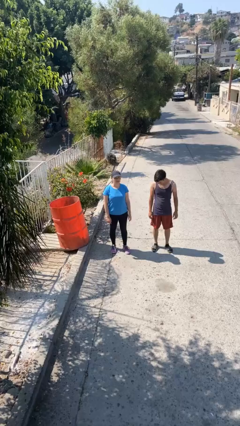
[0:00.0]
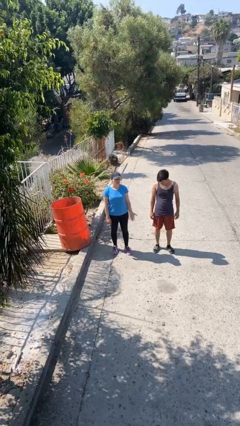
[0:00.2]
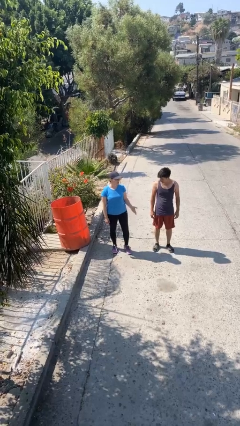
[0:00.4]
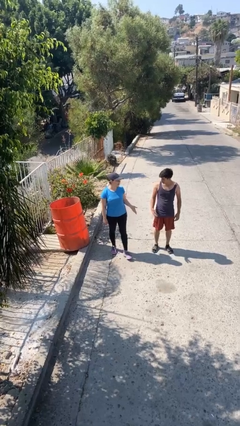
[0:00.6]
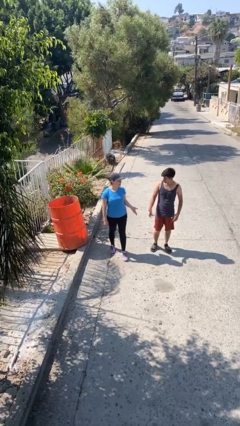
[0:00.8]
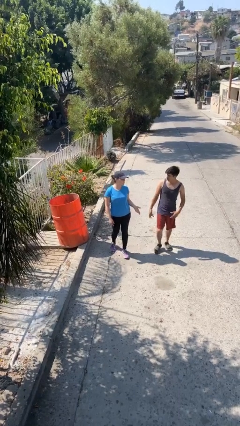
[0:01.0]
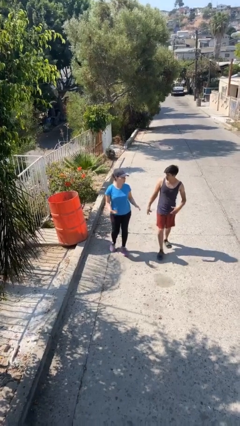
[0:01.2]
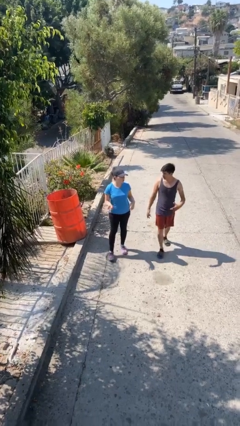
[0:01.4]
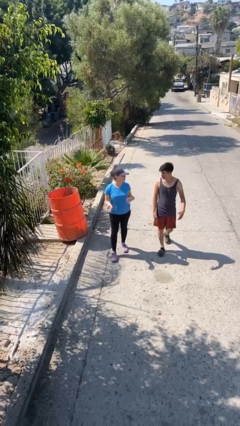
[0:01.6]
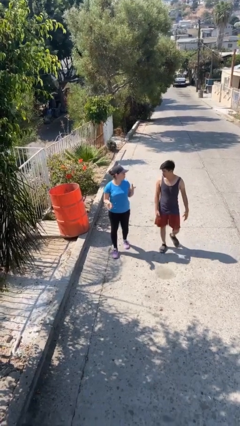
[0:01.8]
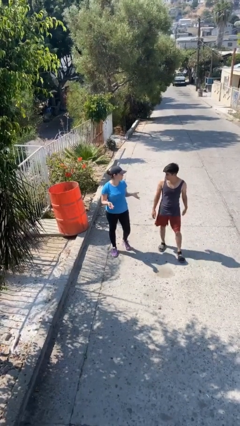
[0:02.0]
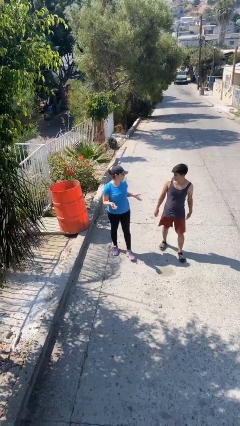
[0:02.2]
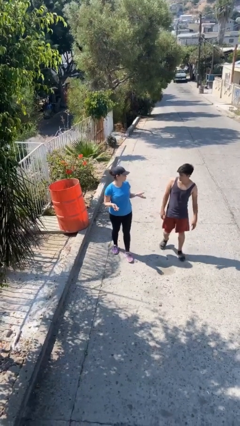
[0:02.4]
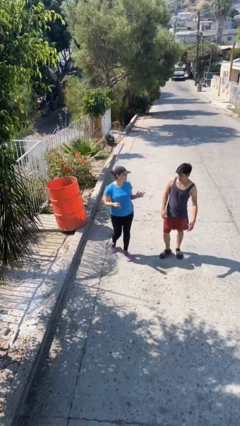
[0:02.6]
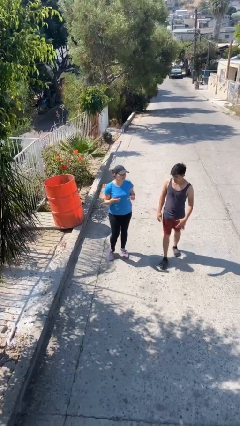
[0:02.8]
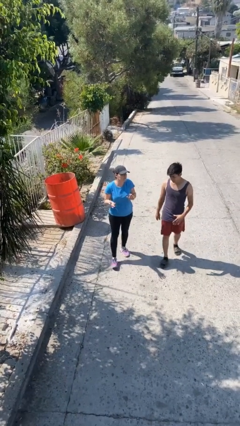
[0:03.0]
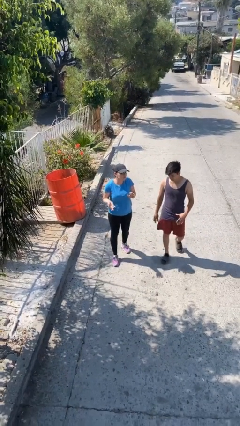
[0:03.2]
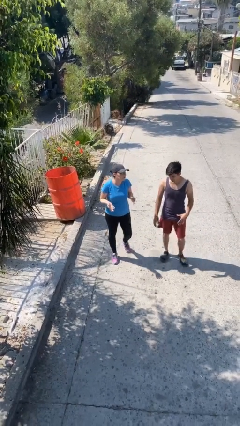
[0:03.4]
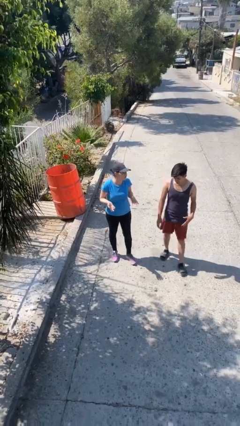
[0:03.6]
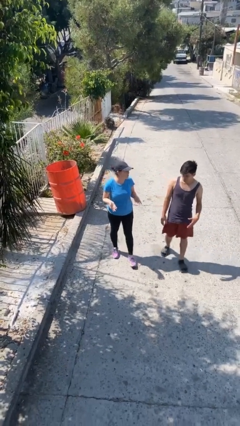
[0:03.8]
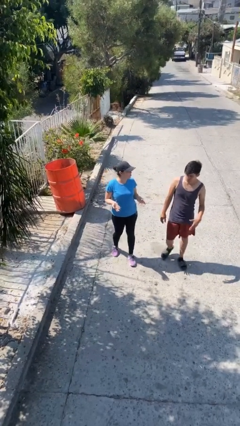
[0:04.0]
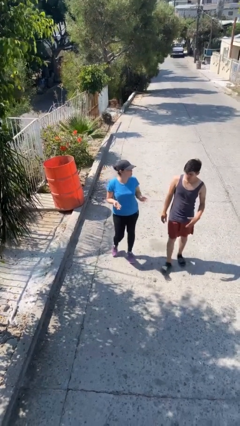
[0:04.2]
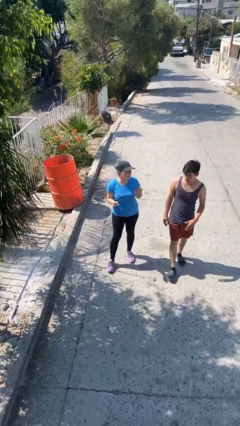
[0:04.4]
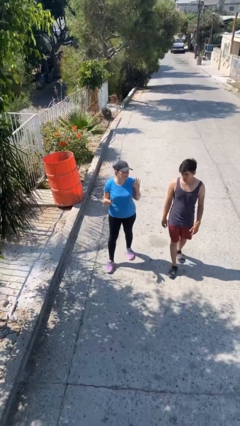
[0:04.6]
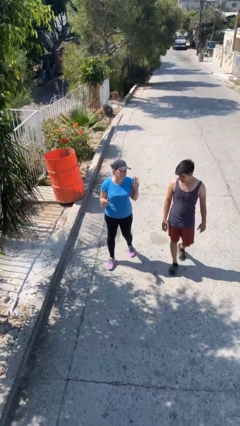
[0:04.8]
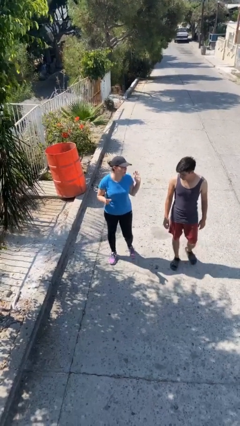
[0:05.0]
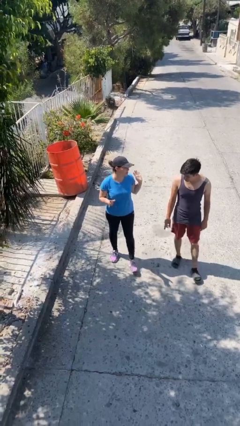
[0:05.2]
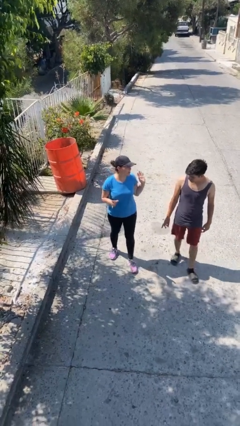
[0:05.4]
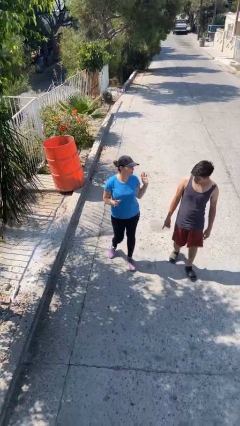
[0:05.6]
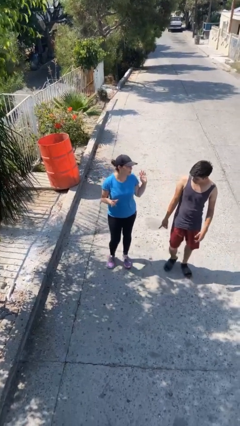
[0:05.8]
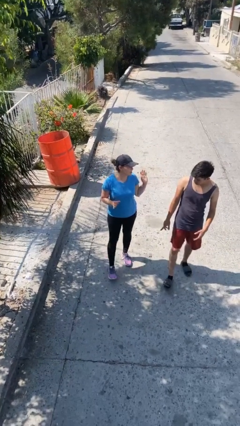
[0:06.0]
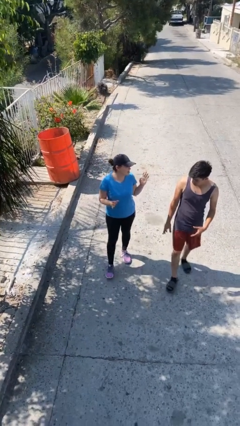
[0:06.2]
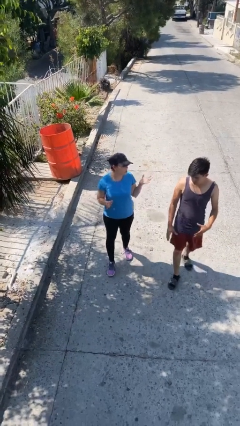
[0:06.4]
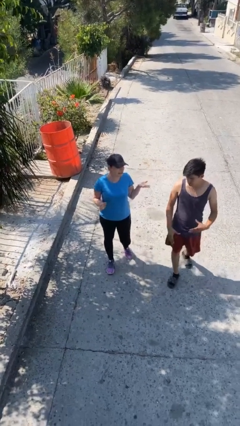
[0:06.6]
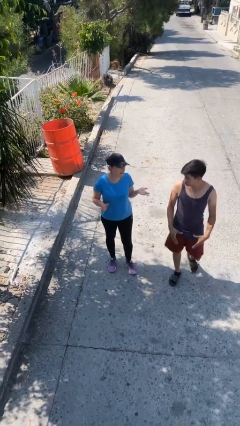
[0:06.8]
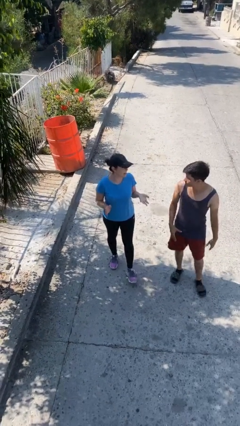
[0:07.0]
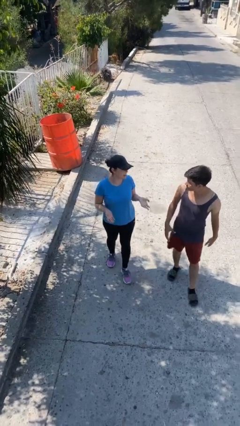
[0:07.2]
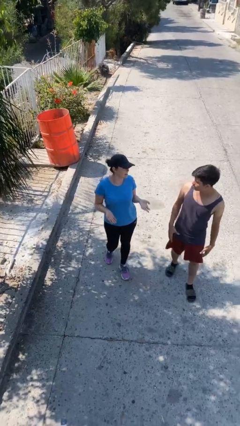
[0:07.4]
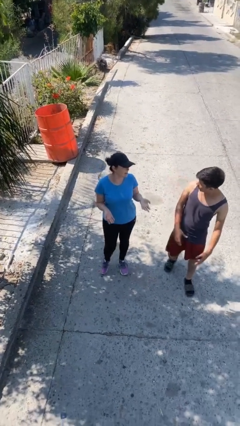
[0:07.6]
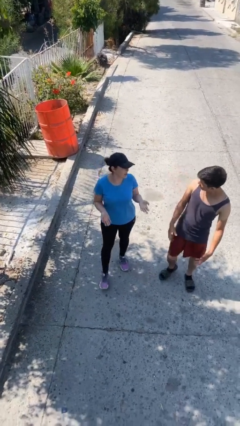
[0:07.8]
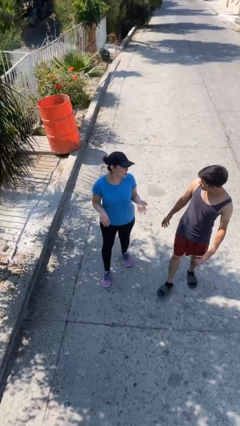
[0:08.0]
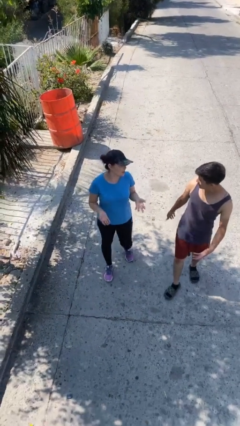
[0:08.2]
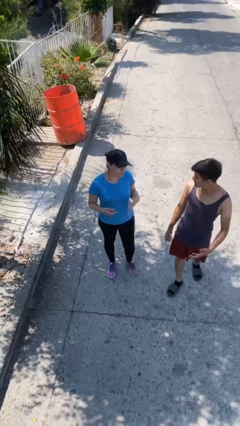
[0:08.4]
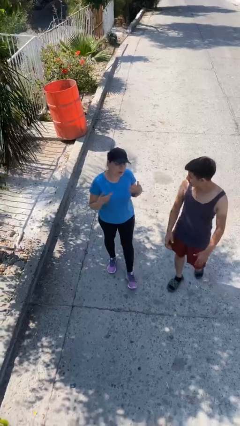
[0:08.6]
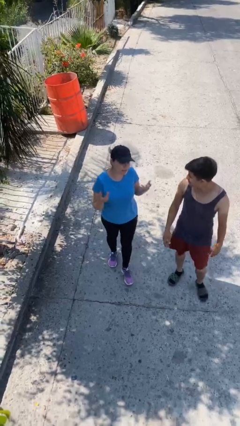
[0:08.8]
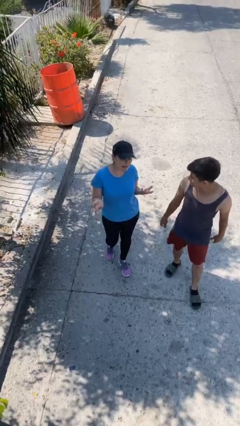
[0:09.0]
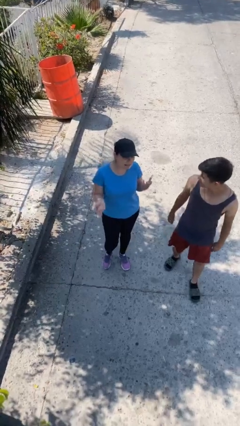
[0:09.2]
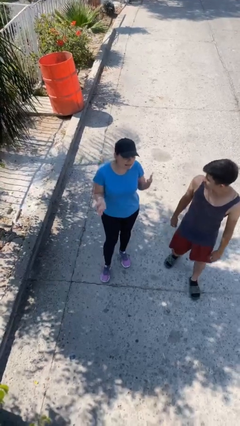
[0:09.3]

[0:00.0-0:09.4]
person talks to person

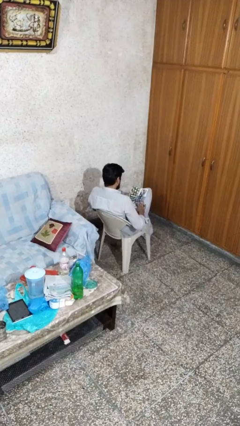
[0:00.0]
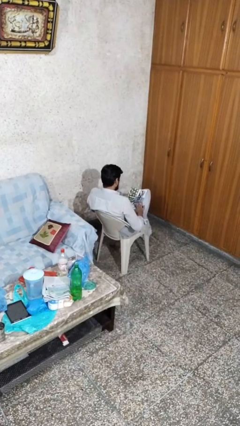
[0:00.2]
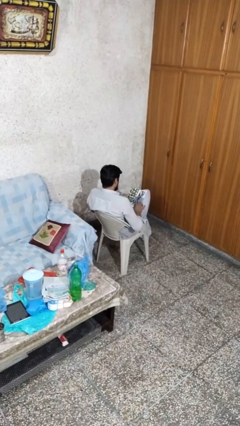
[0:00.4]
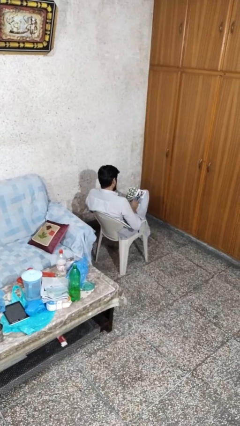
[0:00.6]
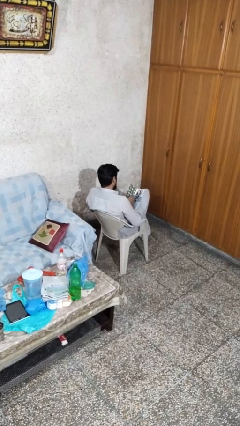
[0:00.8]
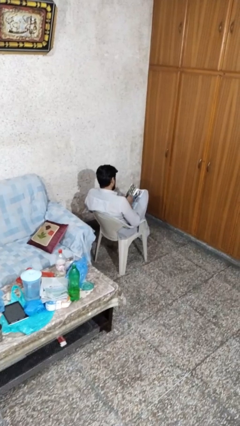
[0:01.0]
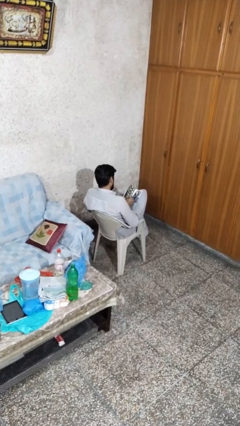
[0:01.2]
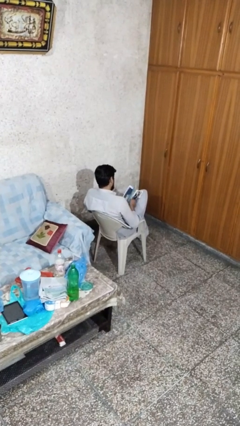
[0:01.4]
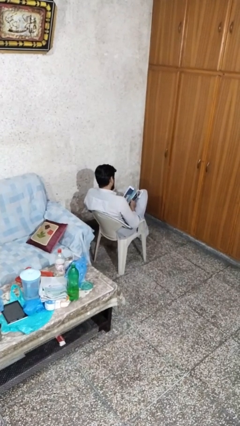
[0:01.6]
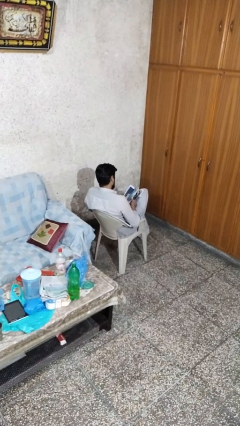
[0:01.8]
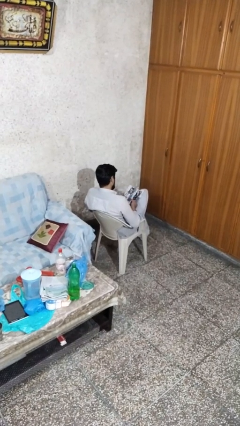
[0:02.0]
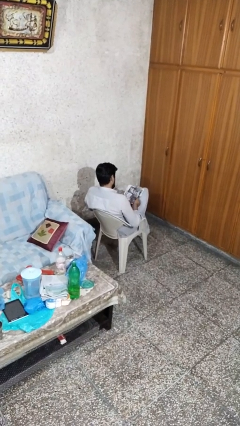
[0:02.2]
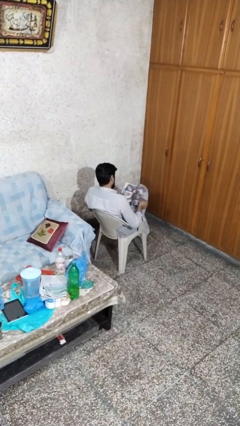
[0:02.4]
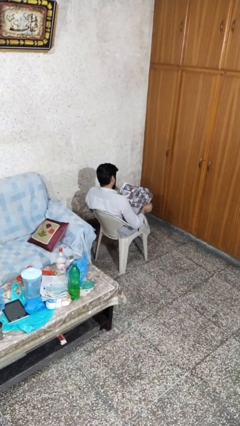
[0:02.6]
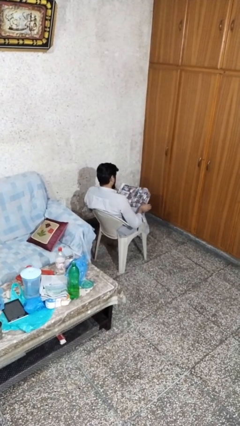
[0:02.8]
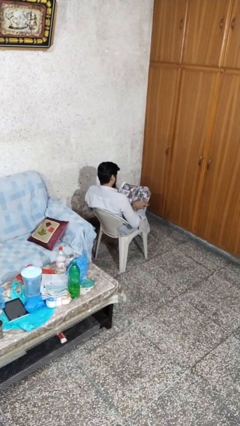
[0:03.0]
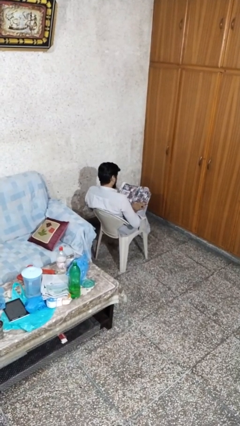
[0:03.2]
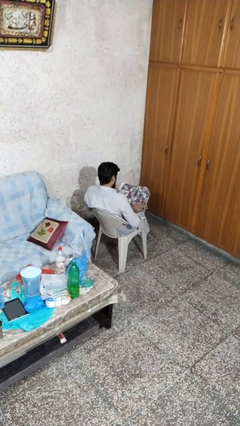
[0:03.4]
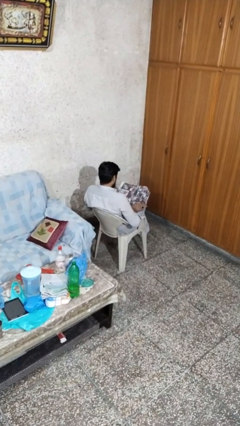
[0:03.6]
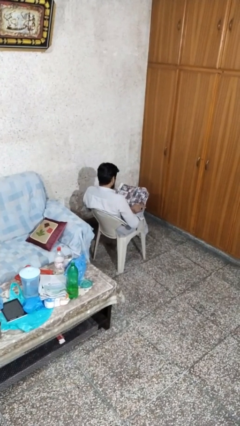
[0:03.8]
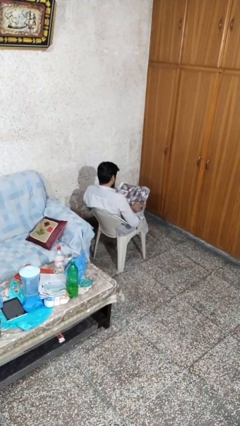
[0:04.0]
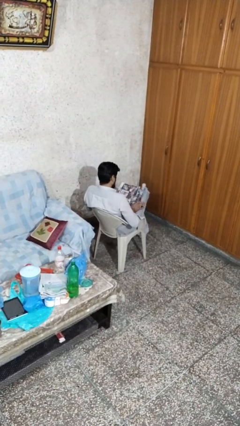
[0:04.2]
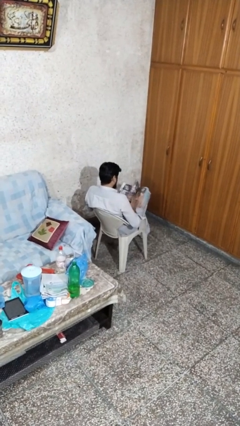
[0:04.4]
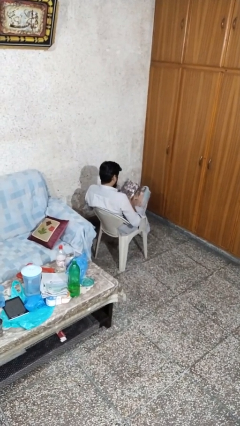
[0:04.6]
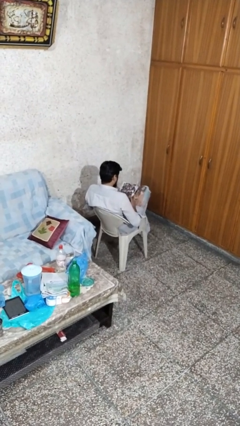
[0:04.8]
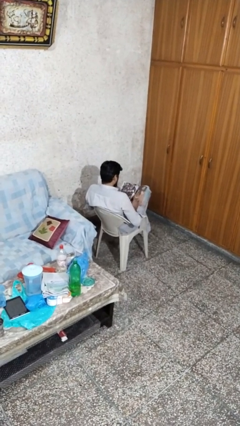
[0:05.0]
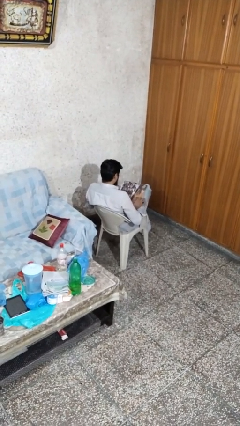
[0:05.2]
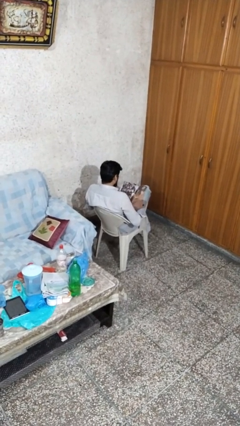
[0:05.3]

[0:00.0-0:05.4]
person reads magazine

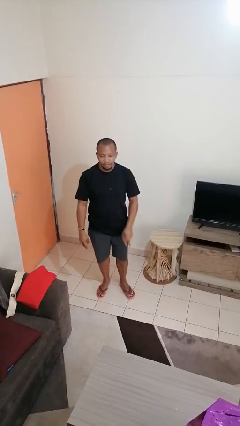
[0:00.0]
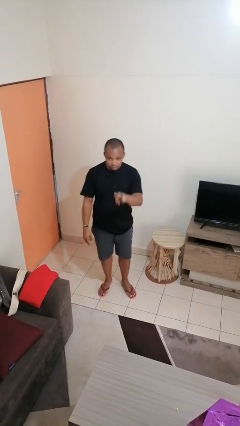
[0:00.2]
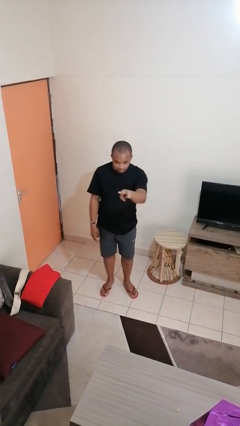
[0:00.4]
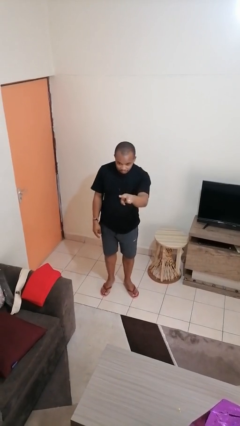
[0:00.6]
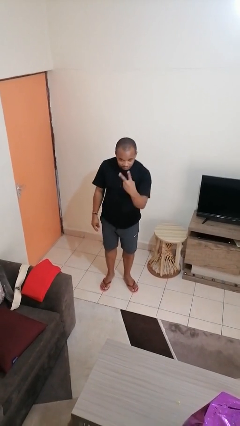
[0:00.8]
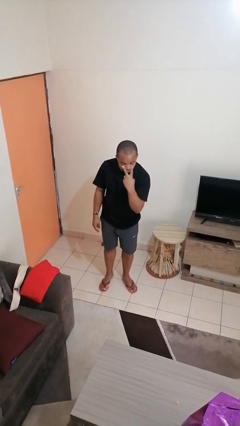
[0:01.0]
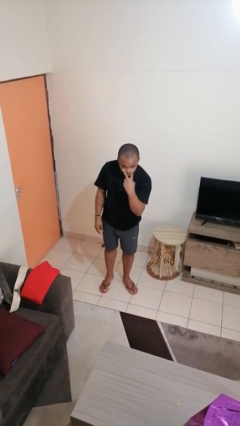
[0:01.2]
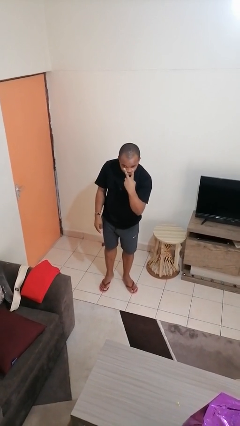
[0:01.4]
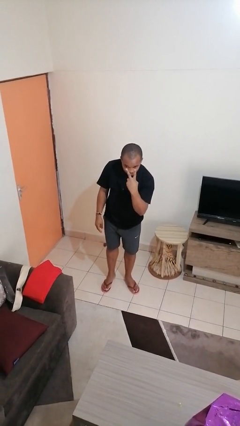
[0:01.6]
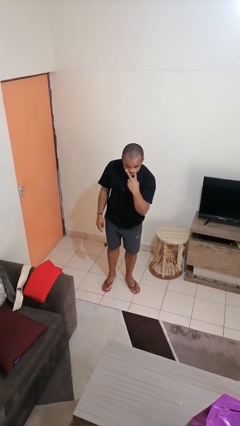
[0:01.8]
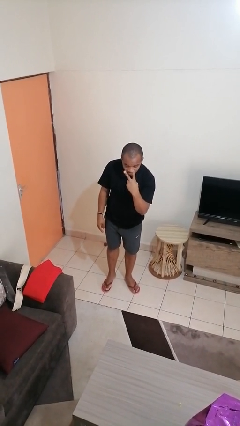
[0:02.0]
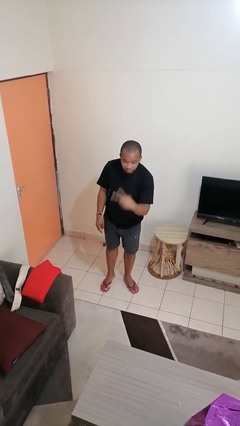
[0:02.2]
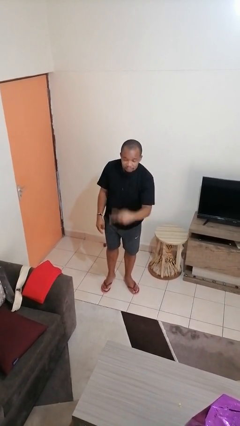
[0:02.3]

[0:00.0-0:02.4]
person gestures watch closely

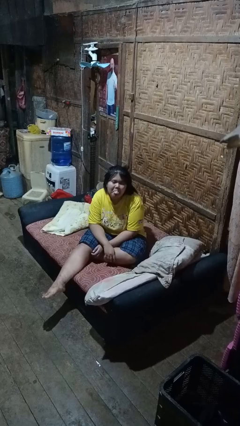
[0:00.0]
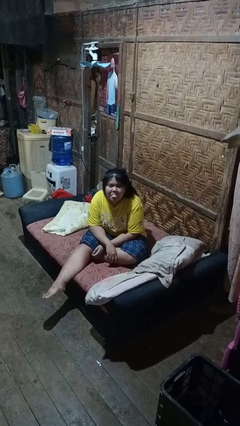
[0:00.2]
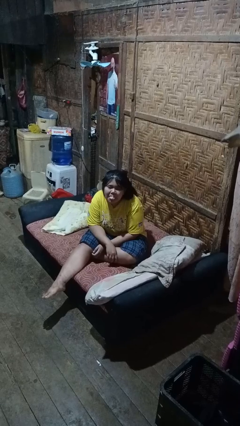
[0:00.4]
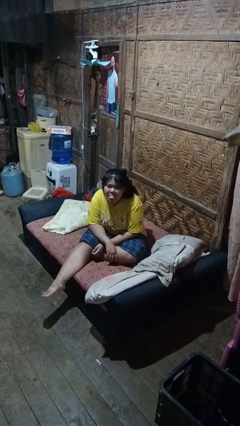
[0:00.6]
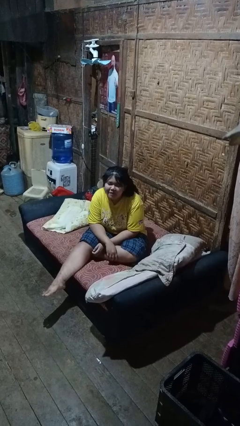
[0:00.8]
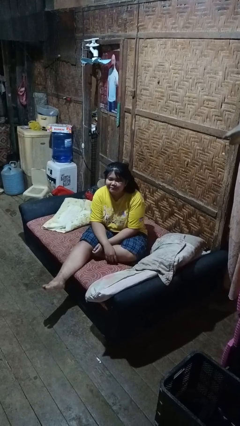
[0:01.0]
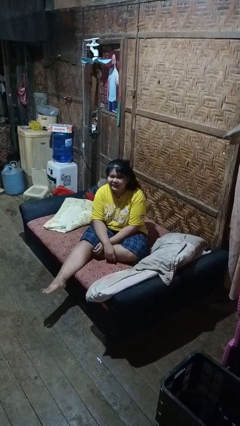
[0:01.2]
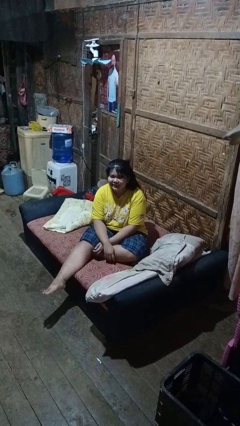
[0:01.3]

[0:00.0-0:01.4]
person sticks out tongue
